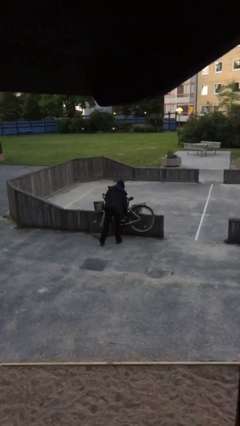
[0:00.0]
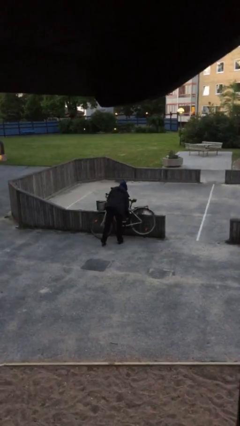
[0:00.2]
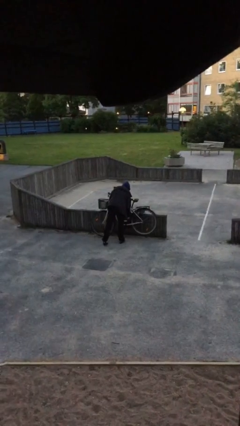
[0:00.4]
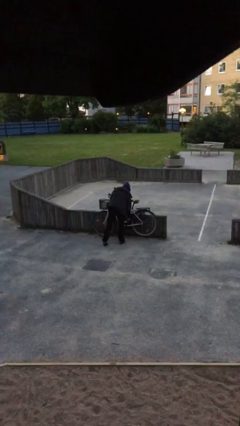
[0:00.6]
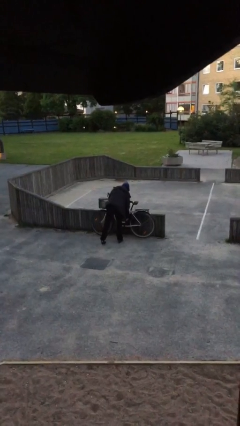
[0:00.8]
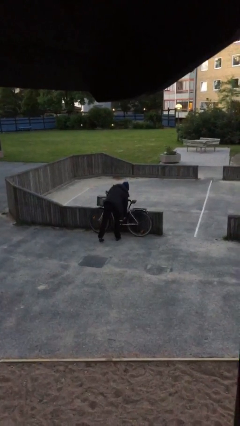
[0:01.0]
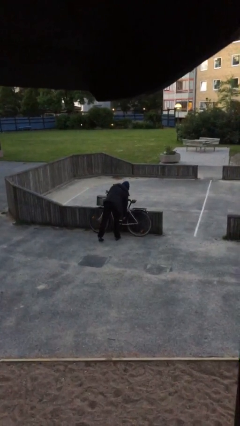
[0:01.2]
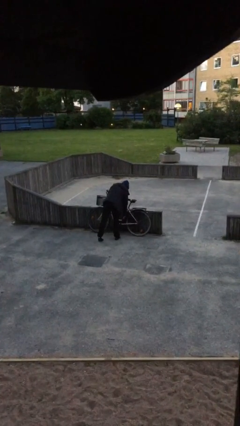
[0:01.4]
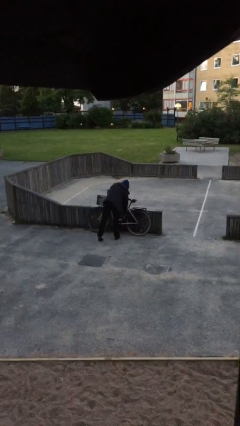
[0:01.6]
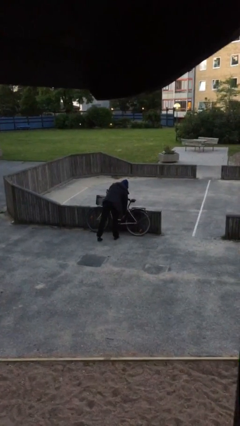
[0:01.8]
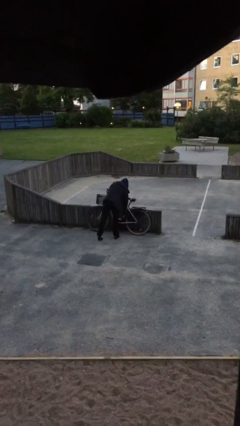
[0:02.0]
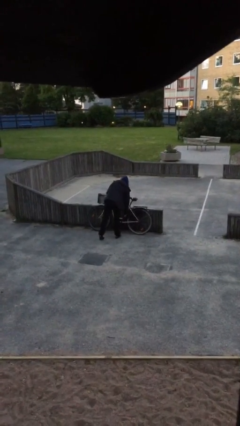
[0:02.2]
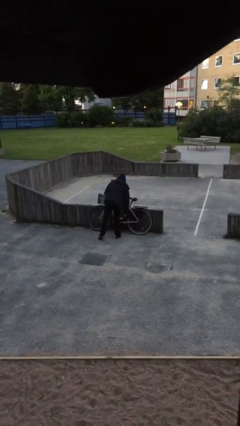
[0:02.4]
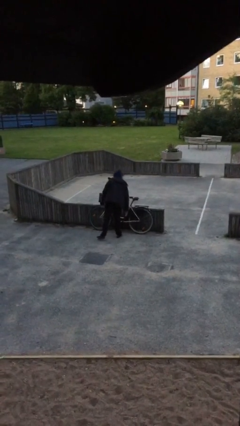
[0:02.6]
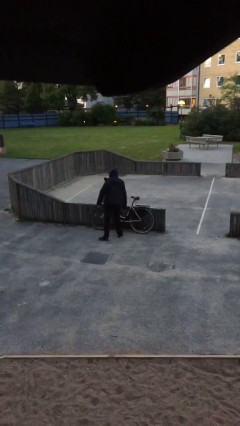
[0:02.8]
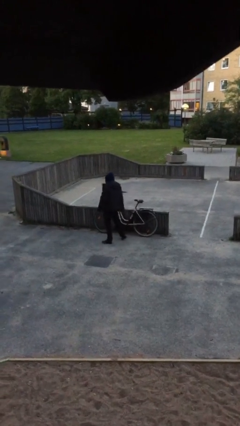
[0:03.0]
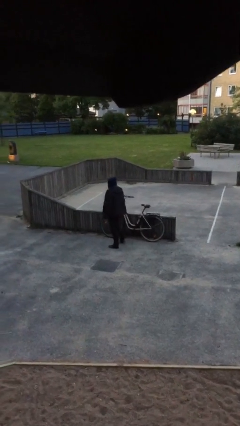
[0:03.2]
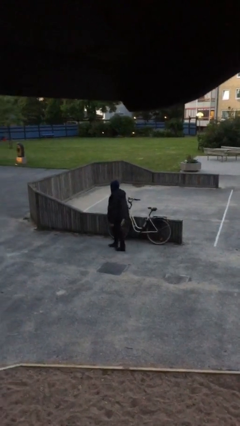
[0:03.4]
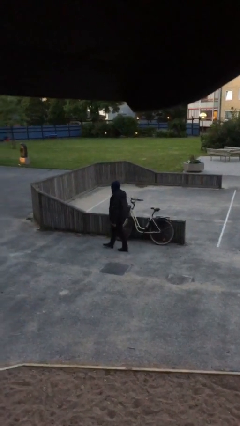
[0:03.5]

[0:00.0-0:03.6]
person puts down object on floor

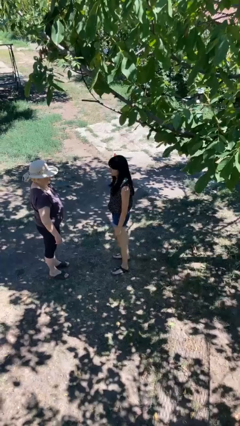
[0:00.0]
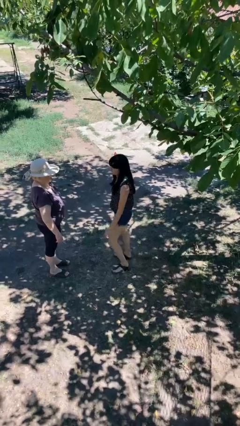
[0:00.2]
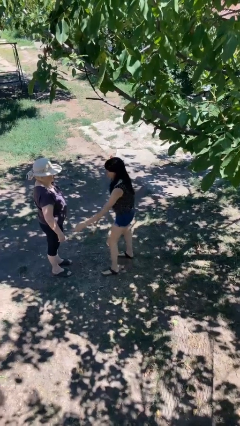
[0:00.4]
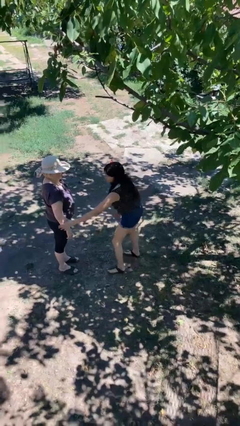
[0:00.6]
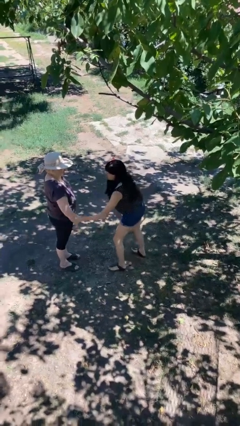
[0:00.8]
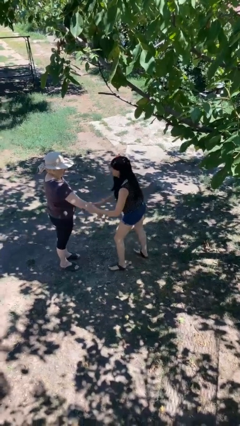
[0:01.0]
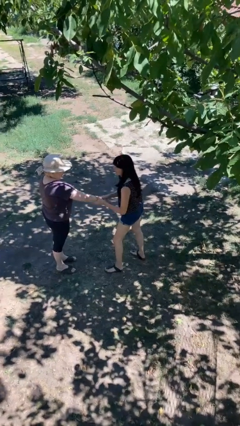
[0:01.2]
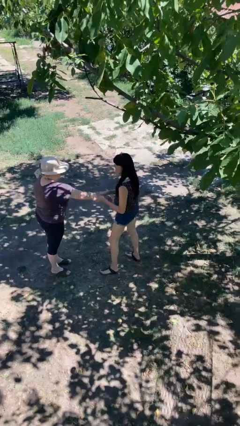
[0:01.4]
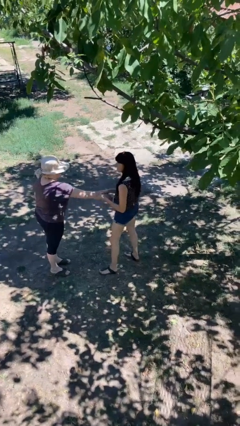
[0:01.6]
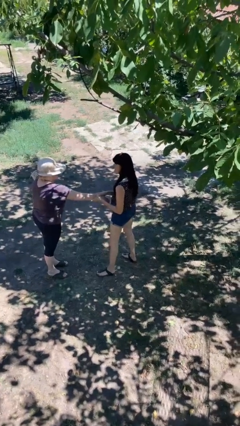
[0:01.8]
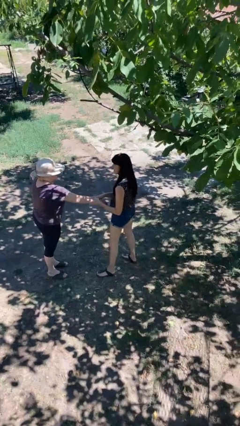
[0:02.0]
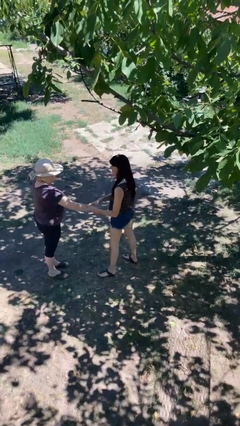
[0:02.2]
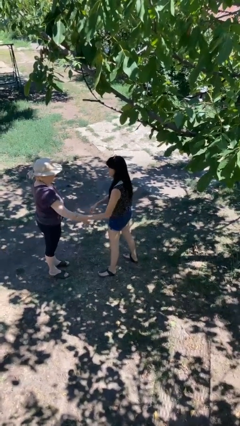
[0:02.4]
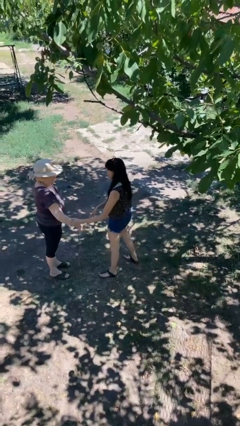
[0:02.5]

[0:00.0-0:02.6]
person grabs person by forearm

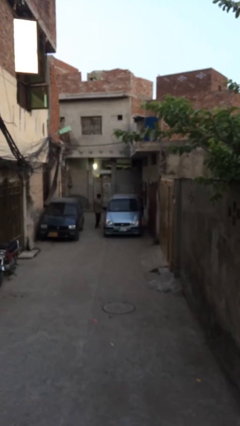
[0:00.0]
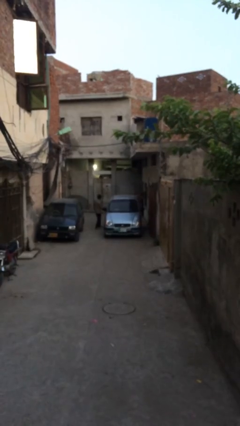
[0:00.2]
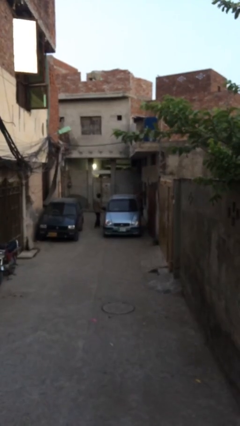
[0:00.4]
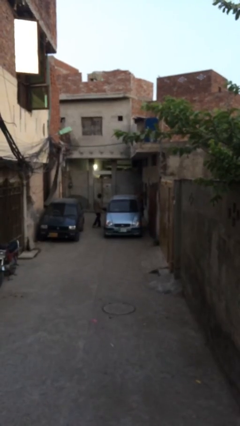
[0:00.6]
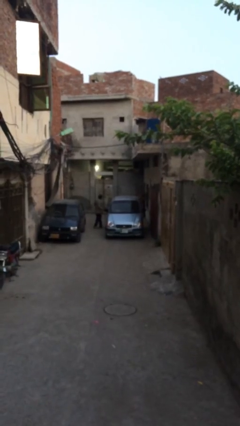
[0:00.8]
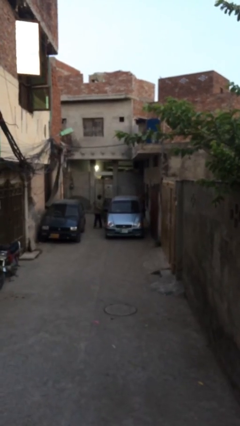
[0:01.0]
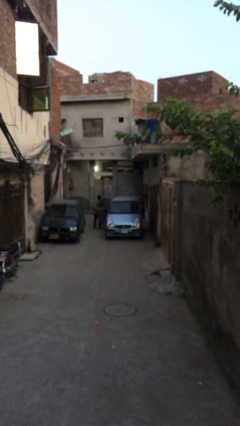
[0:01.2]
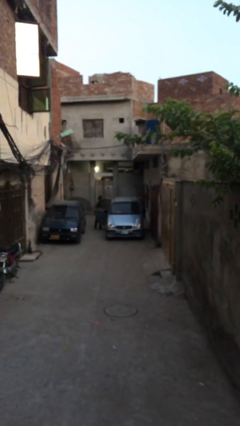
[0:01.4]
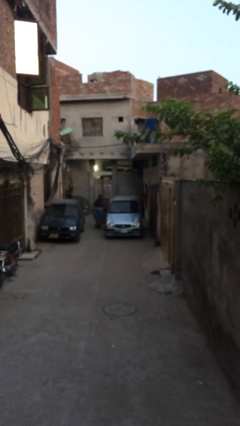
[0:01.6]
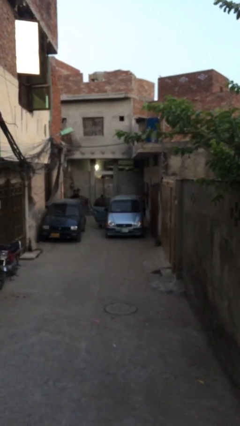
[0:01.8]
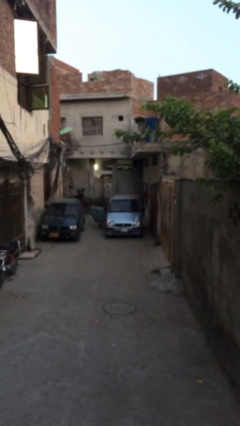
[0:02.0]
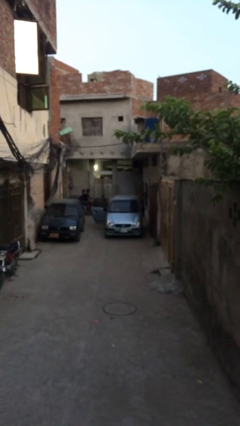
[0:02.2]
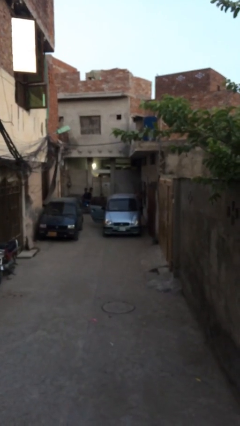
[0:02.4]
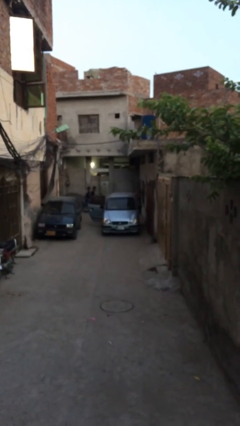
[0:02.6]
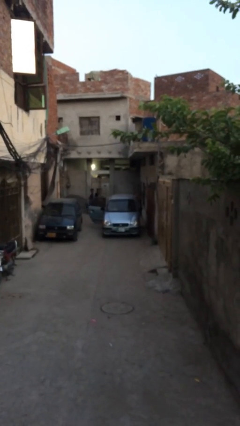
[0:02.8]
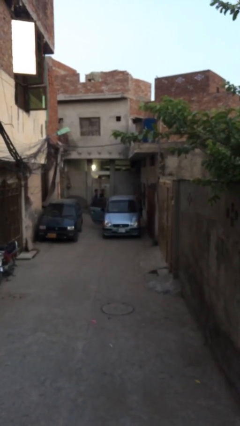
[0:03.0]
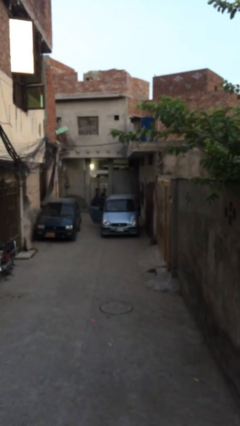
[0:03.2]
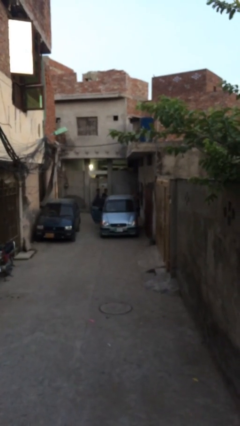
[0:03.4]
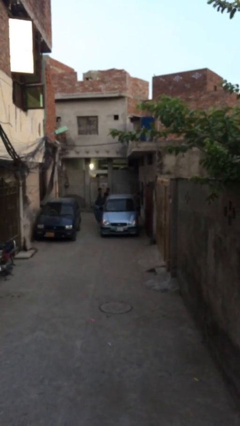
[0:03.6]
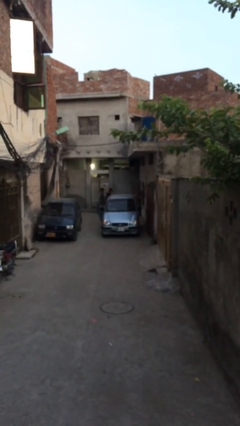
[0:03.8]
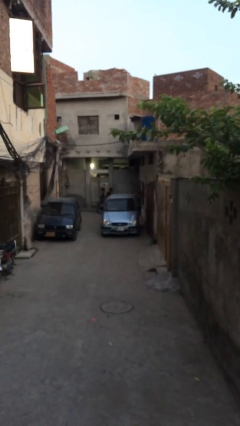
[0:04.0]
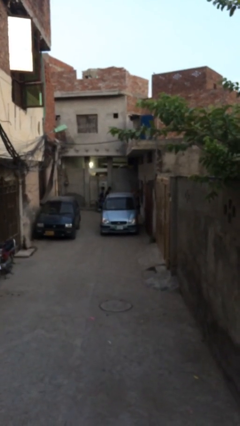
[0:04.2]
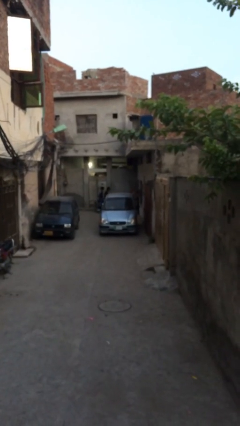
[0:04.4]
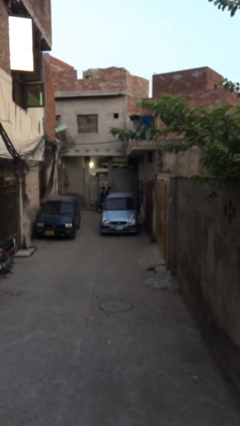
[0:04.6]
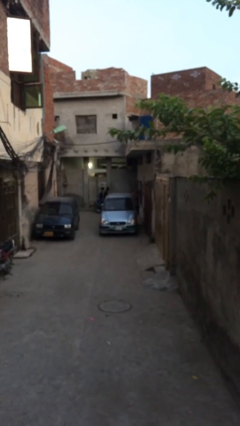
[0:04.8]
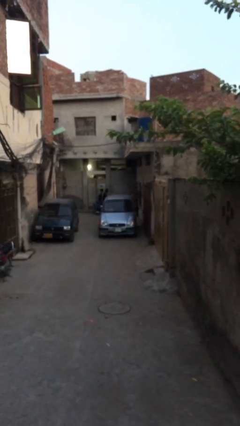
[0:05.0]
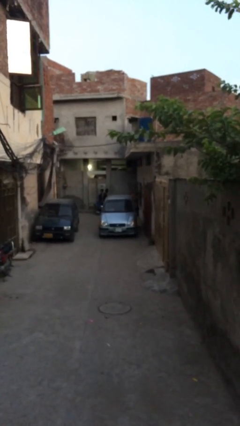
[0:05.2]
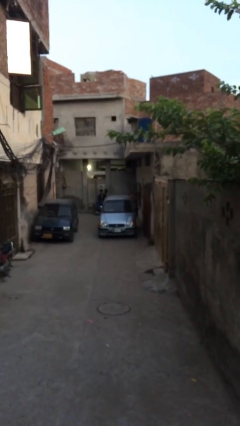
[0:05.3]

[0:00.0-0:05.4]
car picks up person

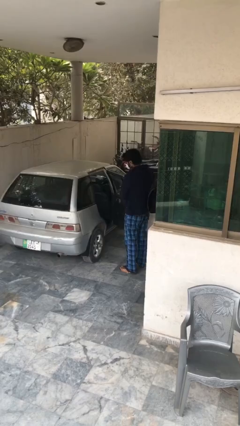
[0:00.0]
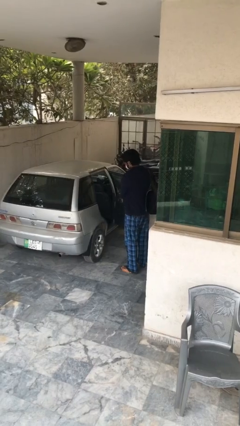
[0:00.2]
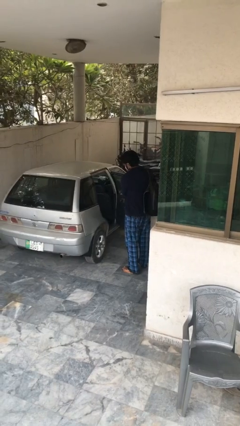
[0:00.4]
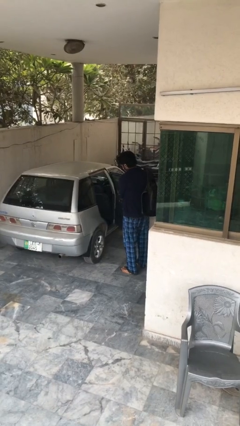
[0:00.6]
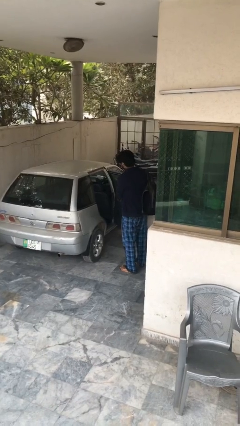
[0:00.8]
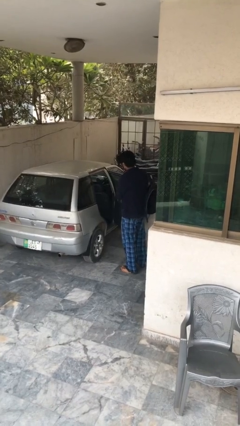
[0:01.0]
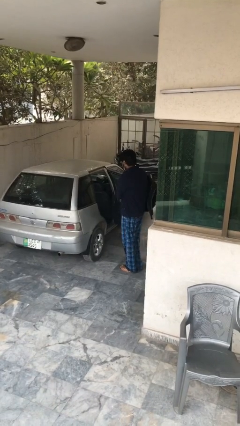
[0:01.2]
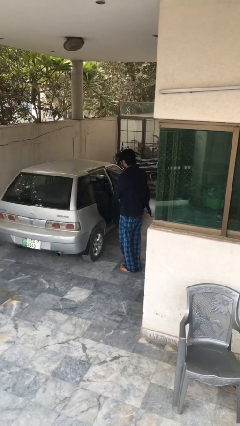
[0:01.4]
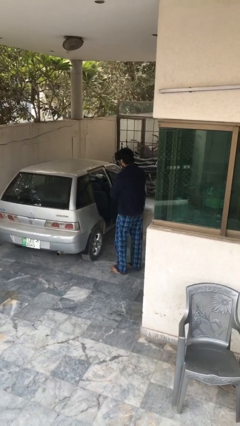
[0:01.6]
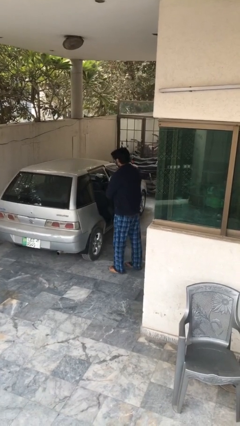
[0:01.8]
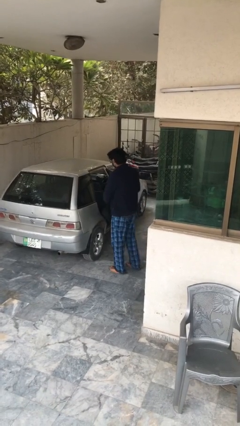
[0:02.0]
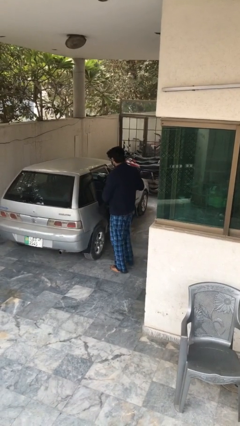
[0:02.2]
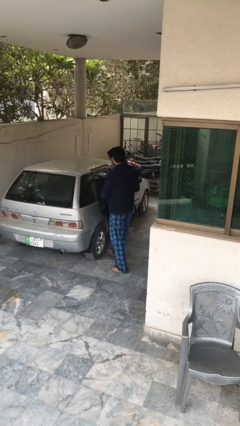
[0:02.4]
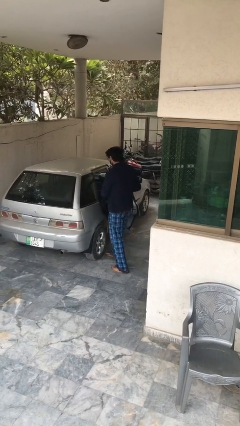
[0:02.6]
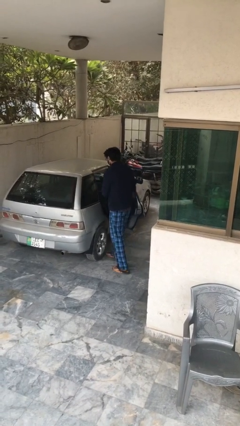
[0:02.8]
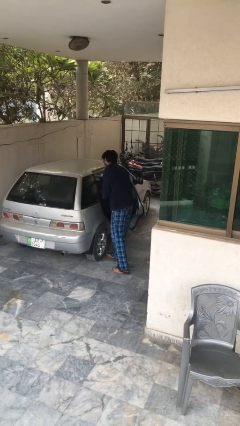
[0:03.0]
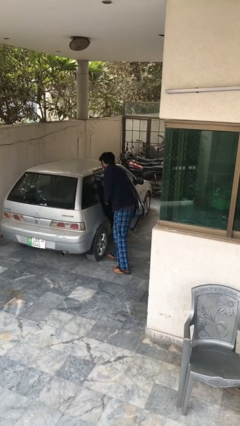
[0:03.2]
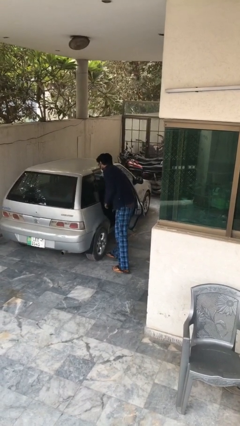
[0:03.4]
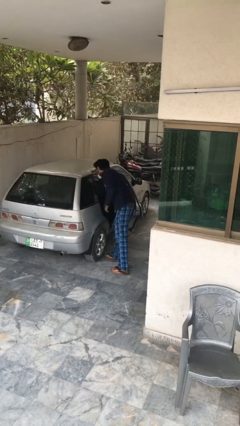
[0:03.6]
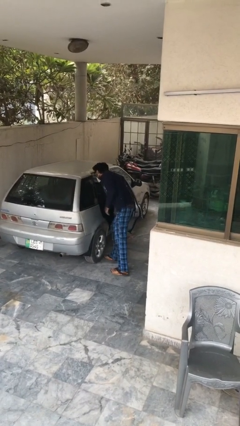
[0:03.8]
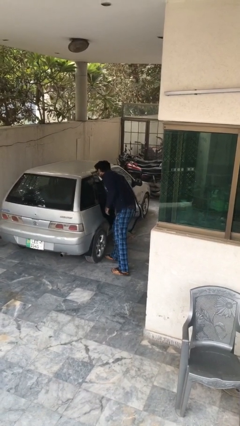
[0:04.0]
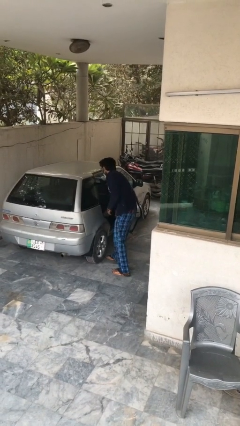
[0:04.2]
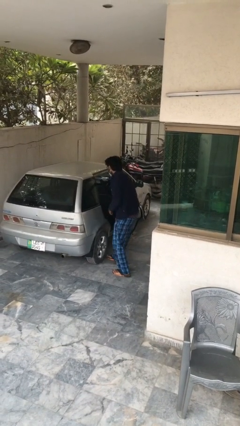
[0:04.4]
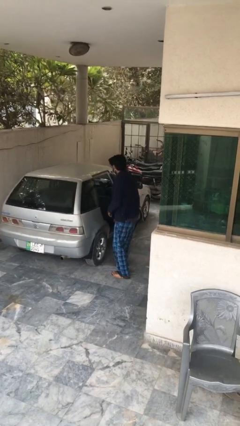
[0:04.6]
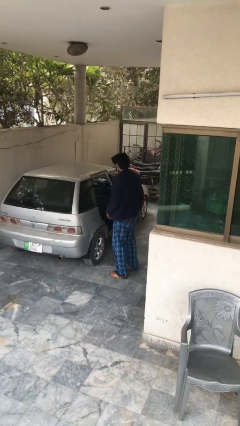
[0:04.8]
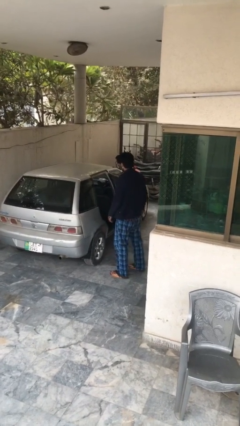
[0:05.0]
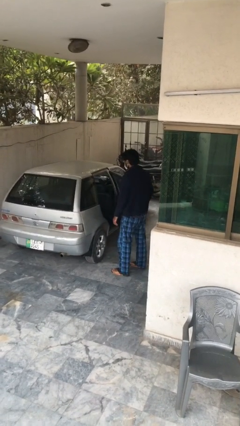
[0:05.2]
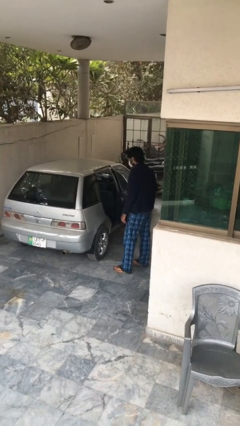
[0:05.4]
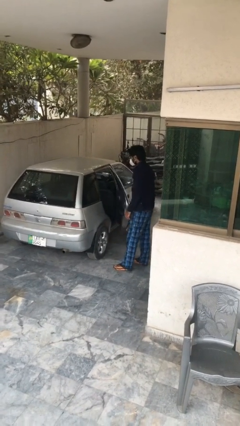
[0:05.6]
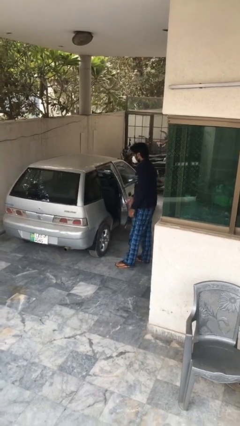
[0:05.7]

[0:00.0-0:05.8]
person loads car

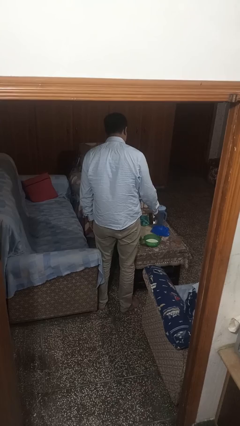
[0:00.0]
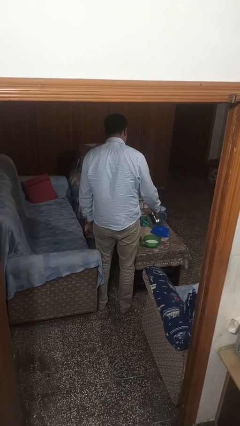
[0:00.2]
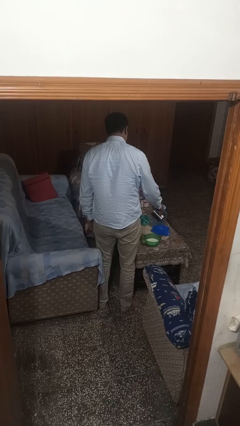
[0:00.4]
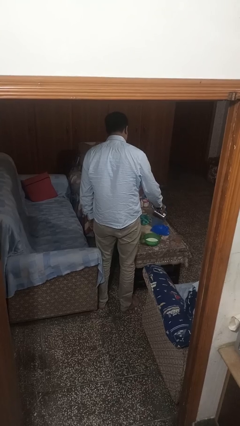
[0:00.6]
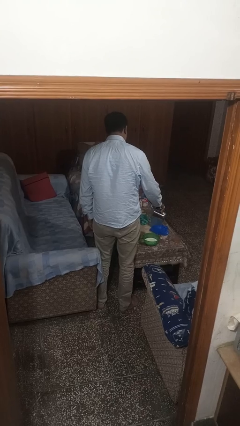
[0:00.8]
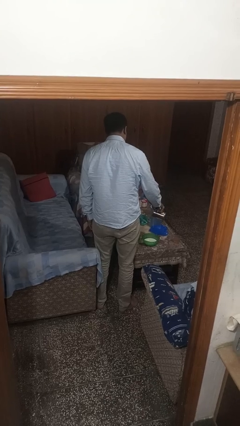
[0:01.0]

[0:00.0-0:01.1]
person pours into bowl
